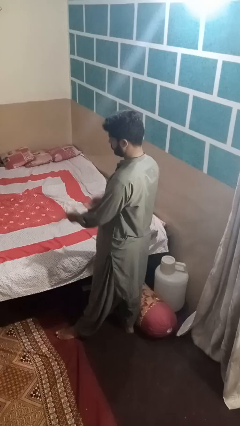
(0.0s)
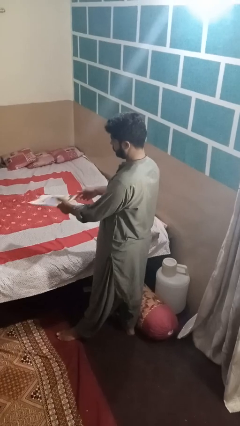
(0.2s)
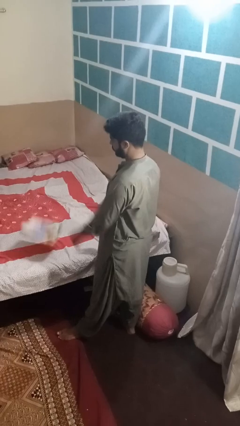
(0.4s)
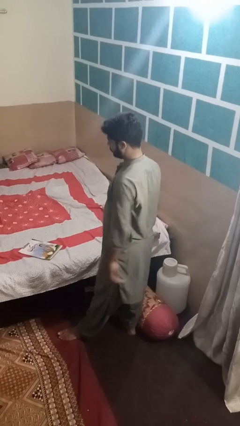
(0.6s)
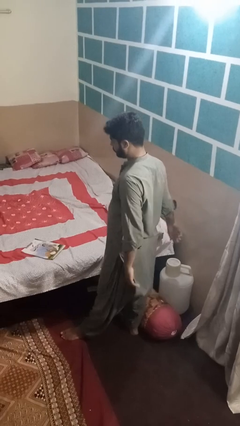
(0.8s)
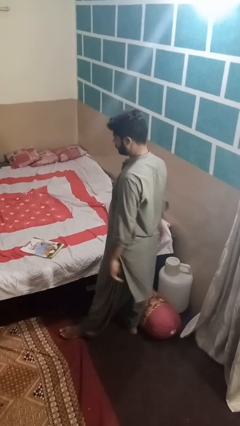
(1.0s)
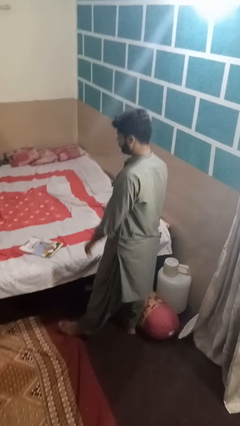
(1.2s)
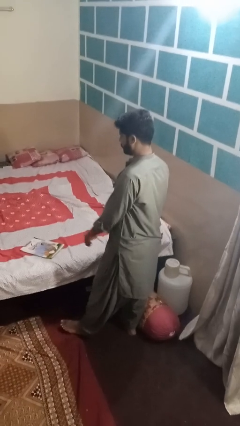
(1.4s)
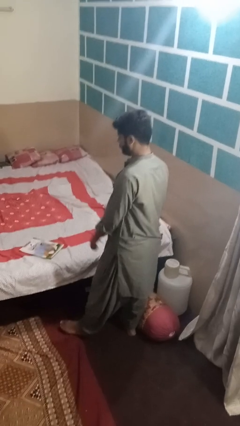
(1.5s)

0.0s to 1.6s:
person throws object on bed

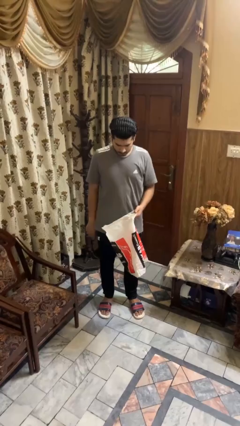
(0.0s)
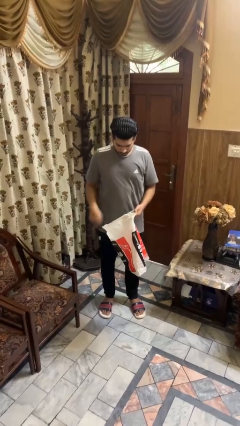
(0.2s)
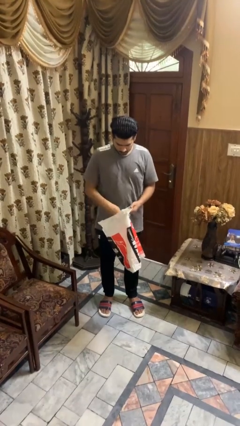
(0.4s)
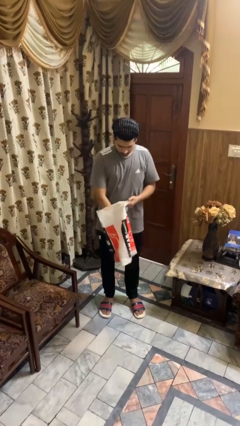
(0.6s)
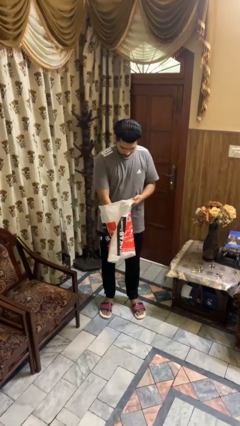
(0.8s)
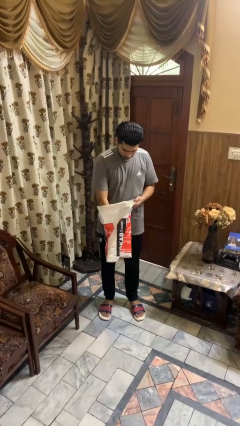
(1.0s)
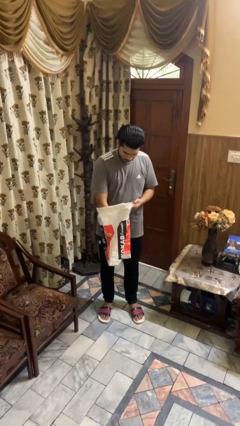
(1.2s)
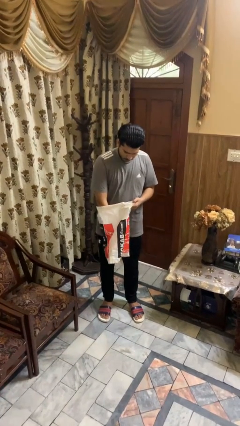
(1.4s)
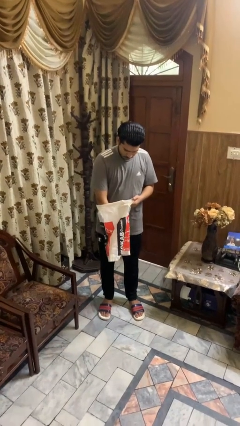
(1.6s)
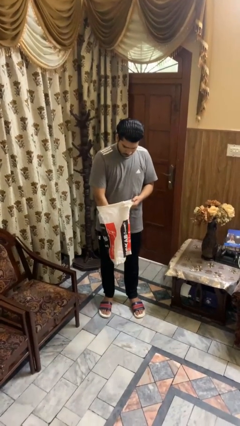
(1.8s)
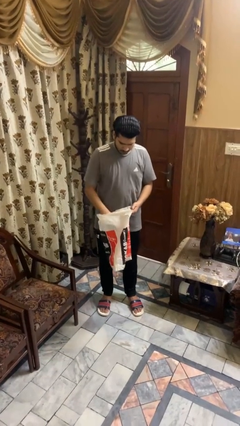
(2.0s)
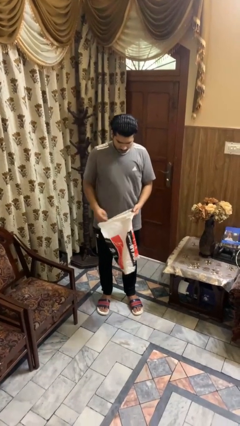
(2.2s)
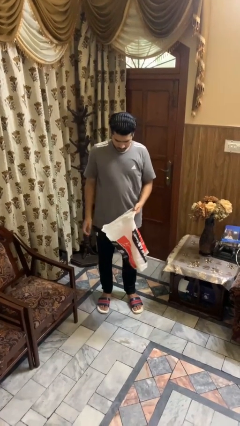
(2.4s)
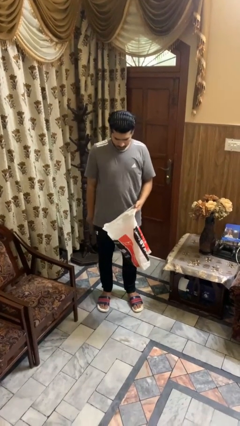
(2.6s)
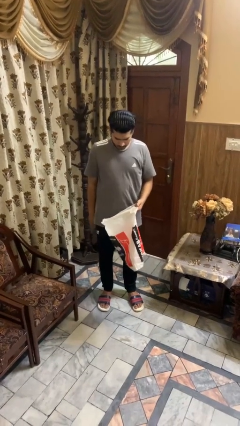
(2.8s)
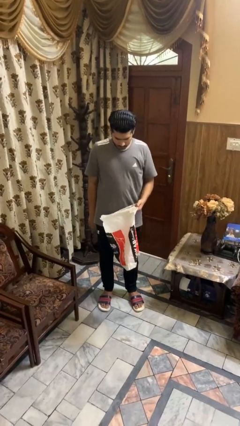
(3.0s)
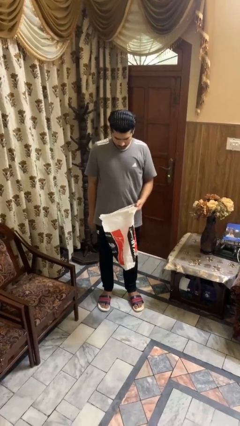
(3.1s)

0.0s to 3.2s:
person searches in bag

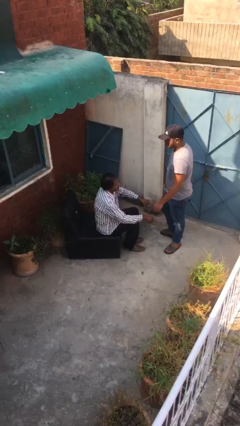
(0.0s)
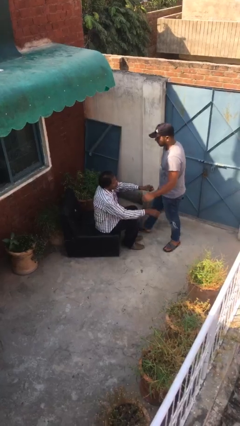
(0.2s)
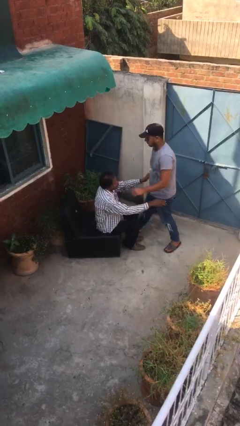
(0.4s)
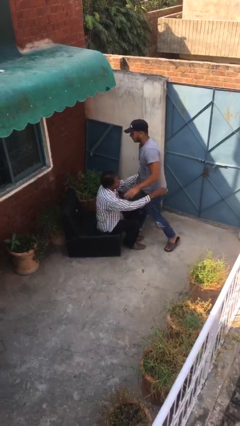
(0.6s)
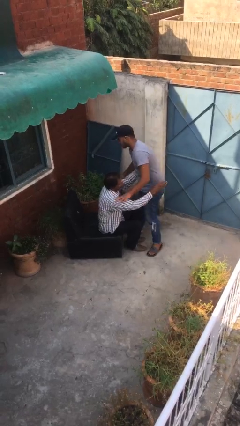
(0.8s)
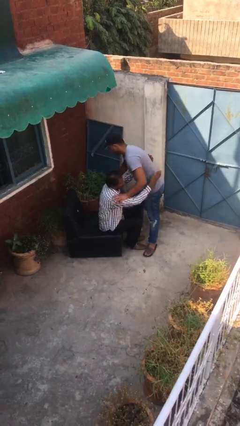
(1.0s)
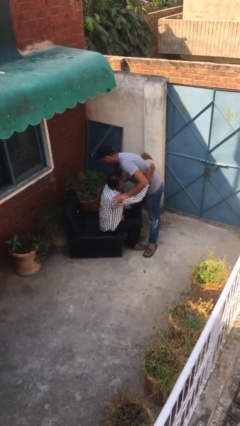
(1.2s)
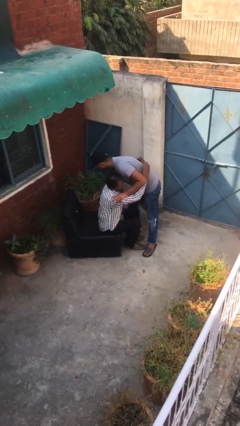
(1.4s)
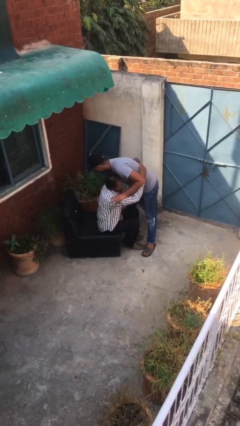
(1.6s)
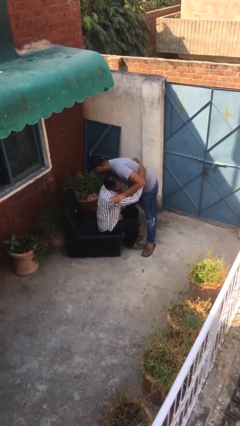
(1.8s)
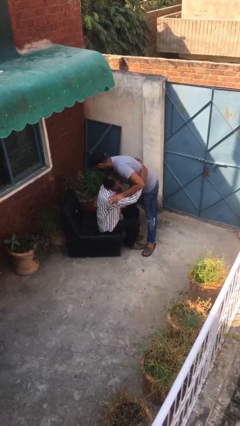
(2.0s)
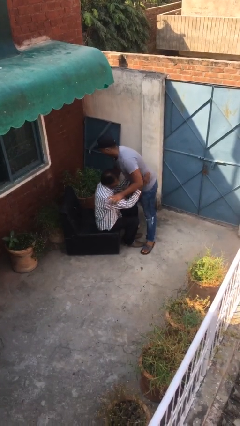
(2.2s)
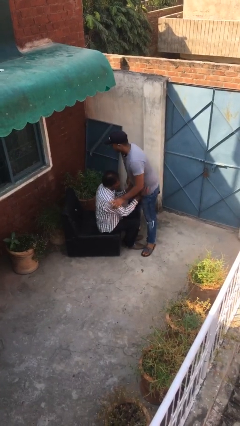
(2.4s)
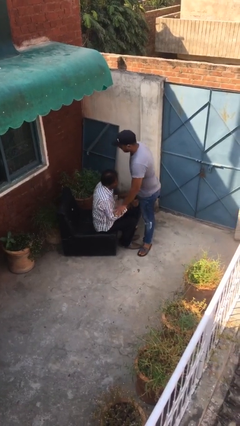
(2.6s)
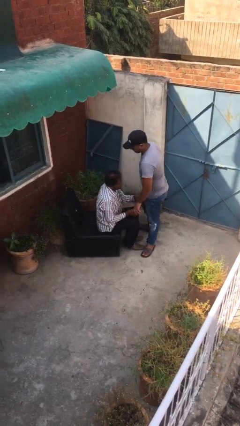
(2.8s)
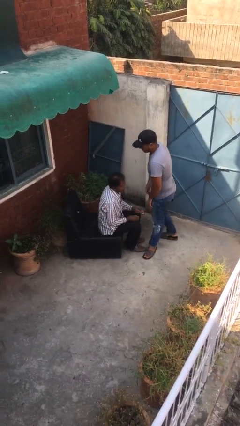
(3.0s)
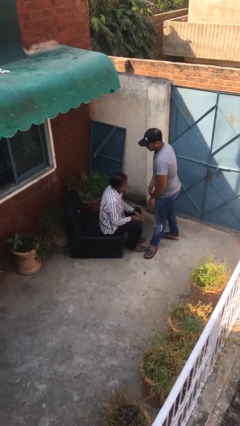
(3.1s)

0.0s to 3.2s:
person embraces person

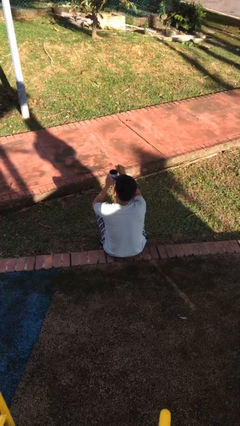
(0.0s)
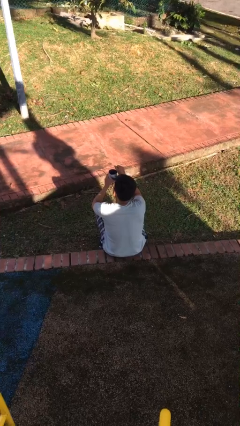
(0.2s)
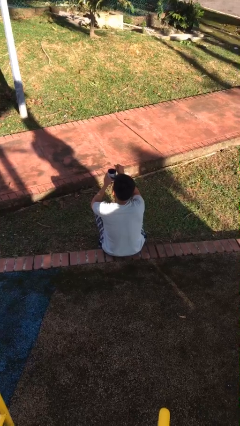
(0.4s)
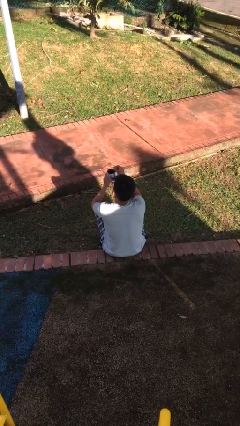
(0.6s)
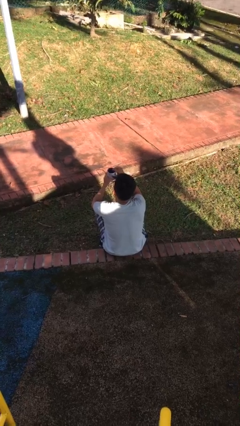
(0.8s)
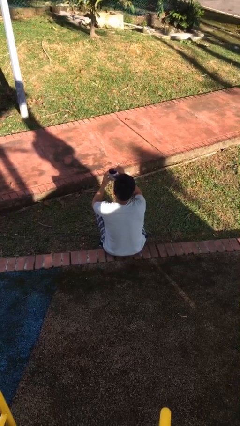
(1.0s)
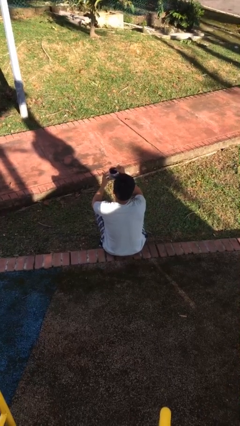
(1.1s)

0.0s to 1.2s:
person stirs mug

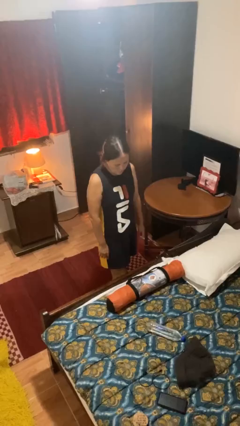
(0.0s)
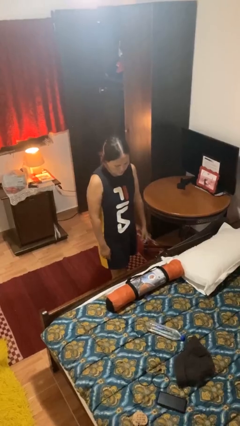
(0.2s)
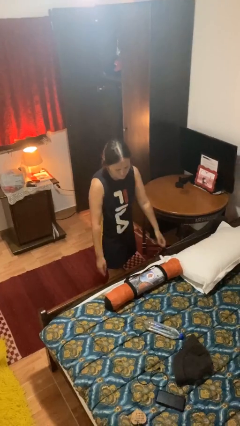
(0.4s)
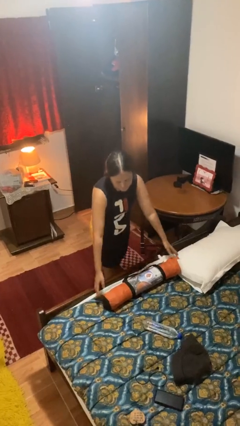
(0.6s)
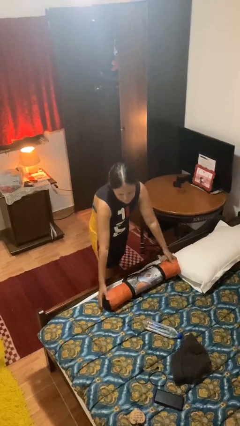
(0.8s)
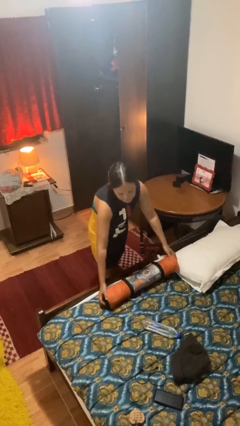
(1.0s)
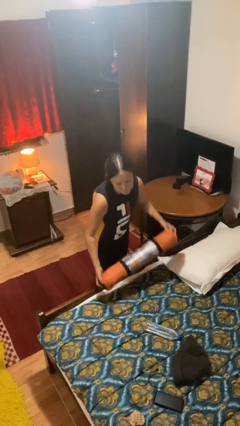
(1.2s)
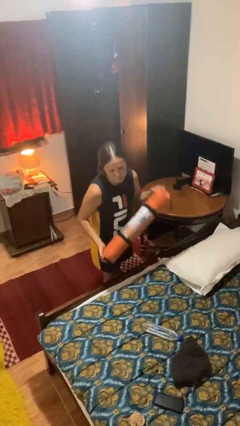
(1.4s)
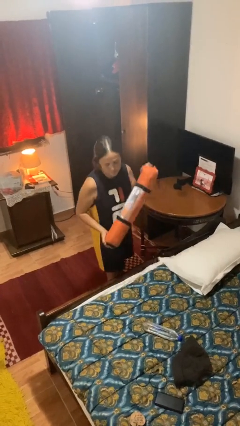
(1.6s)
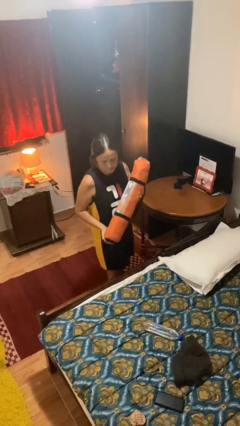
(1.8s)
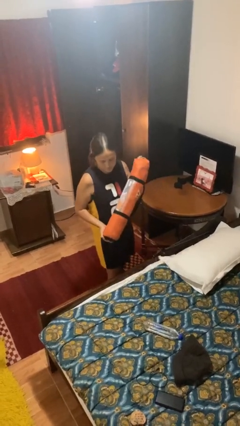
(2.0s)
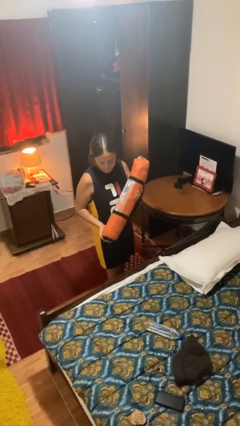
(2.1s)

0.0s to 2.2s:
person picks up object from bed

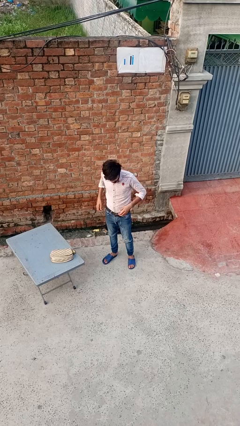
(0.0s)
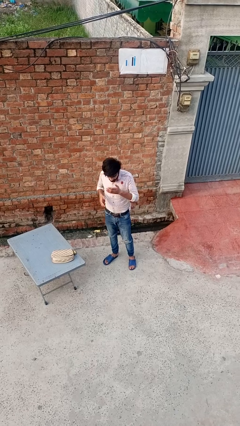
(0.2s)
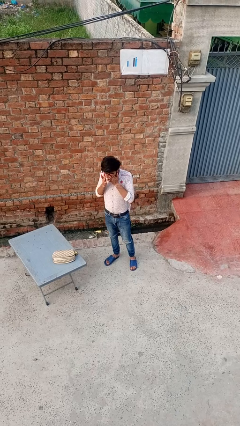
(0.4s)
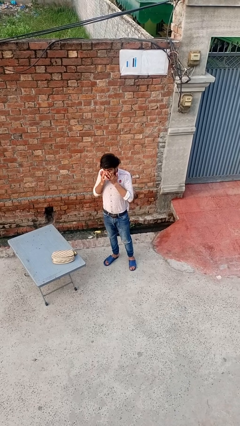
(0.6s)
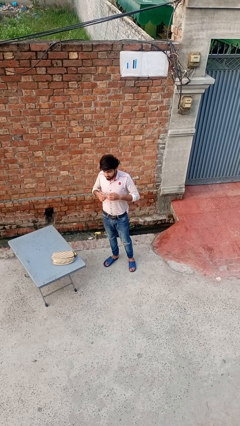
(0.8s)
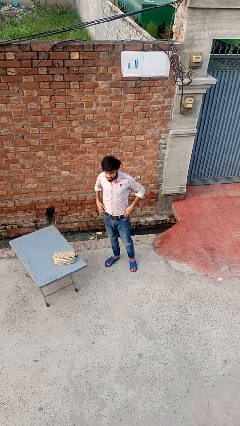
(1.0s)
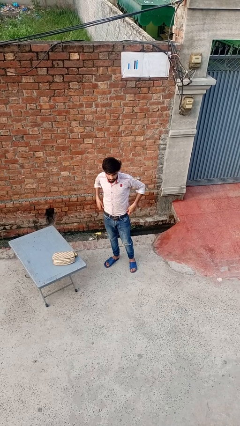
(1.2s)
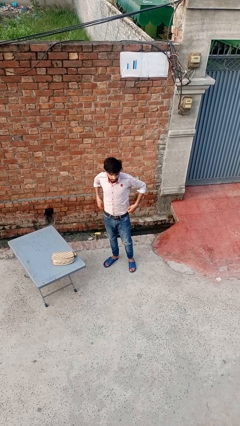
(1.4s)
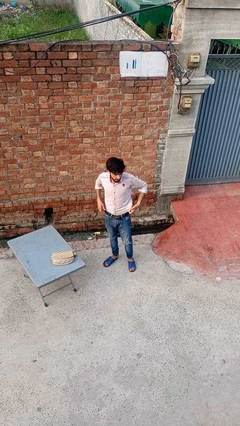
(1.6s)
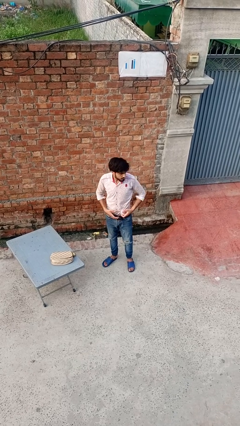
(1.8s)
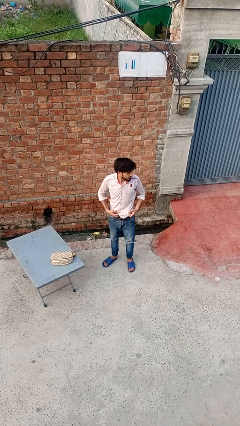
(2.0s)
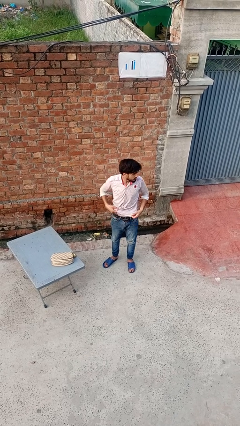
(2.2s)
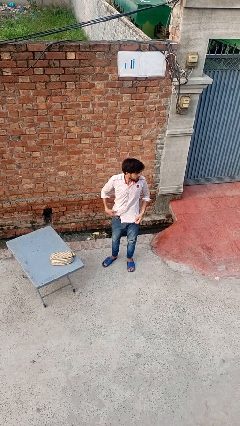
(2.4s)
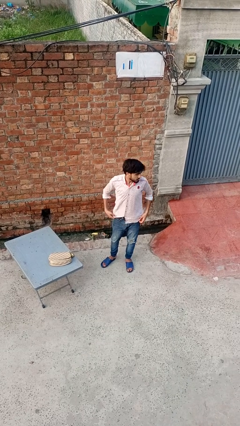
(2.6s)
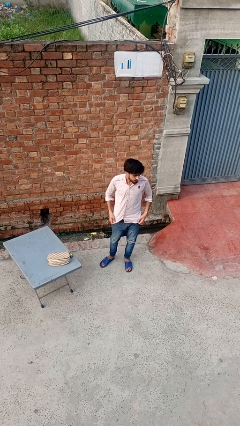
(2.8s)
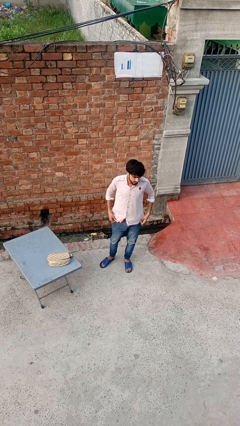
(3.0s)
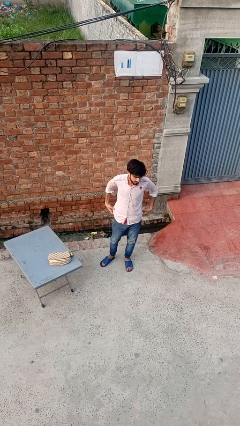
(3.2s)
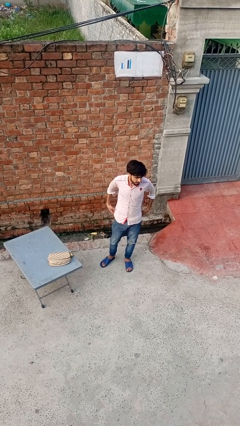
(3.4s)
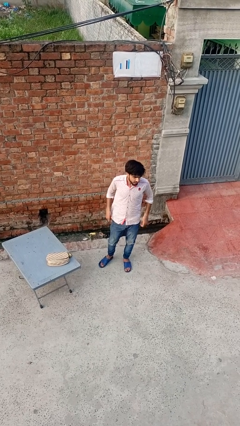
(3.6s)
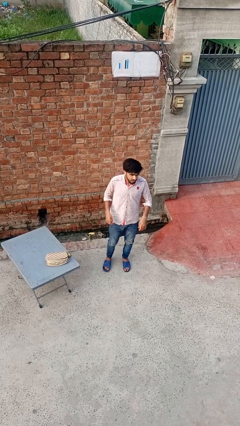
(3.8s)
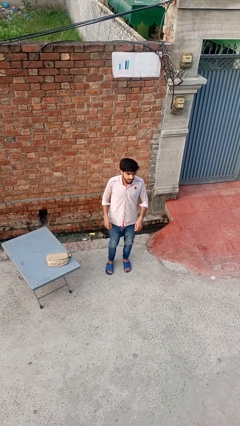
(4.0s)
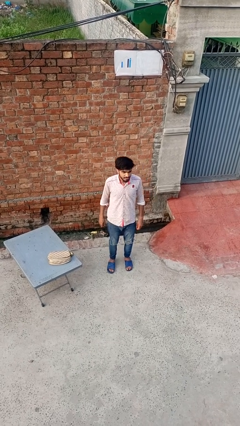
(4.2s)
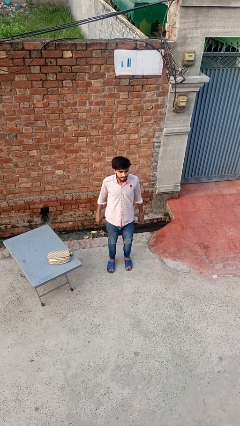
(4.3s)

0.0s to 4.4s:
person untucks shirt

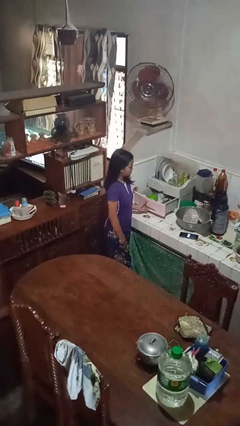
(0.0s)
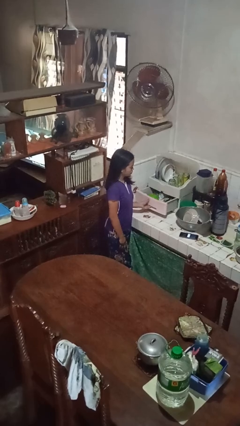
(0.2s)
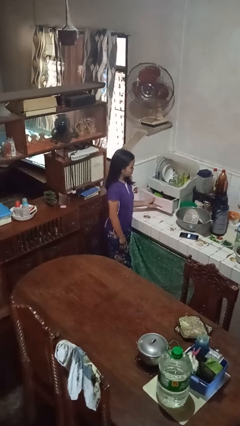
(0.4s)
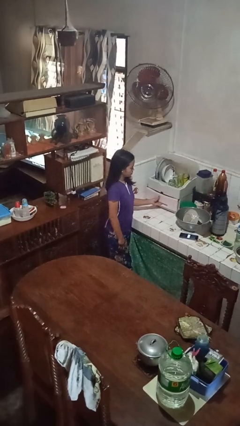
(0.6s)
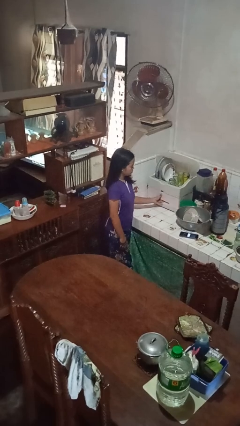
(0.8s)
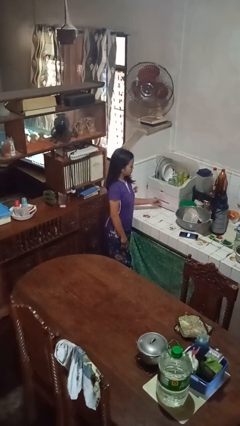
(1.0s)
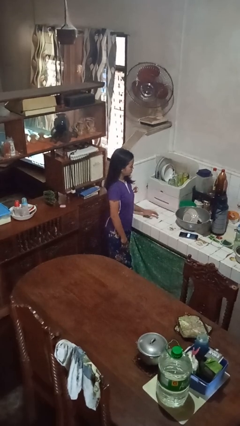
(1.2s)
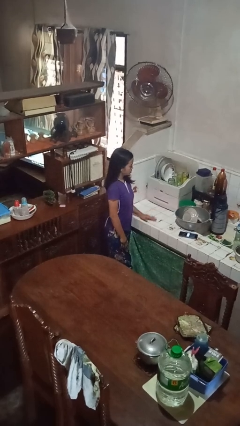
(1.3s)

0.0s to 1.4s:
person closes kitchen drawer
